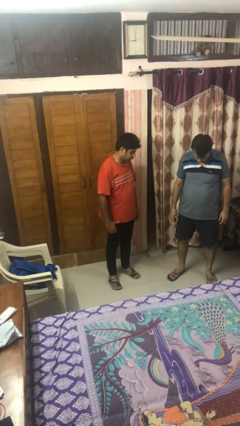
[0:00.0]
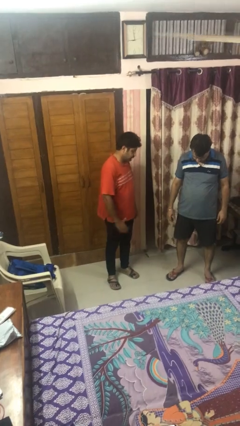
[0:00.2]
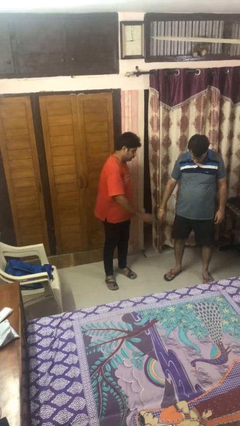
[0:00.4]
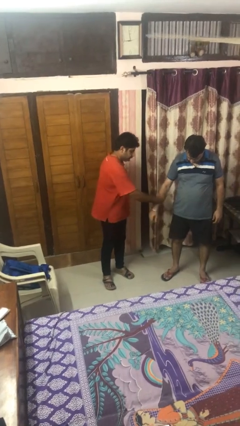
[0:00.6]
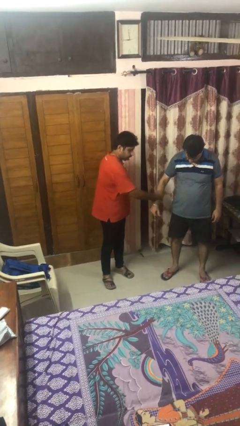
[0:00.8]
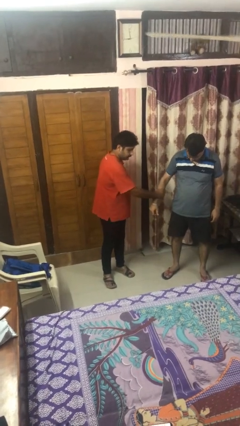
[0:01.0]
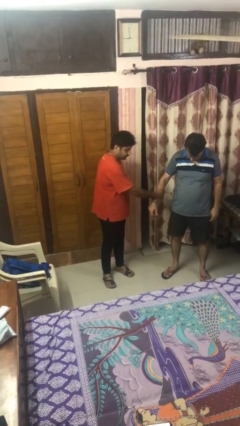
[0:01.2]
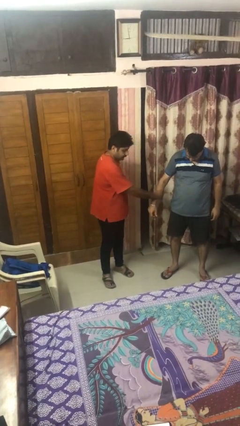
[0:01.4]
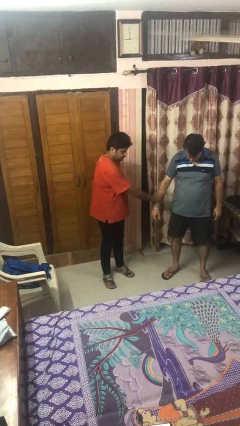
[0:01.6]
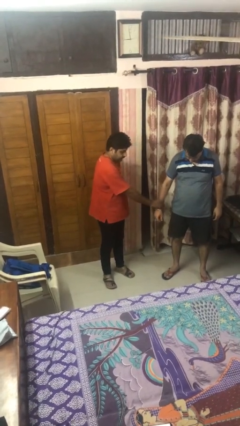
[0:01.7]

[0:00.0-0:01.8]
person grabs person by forearm

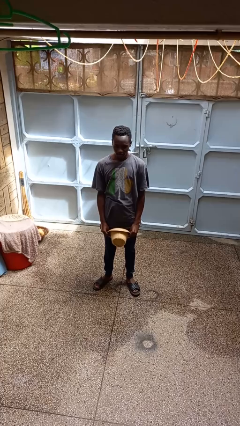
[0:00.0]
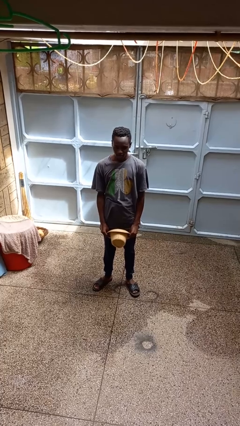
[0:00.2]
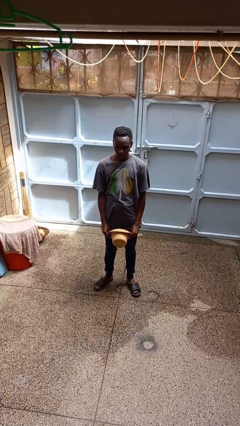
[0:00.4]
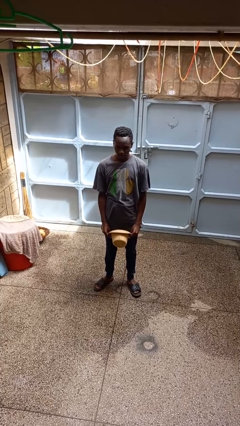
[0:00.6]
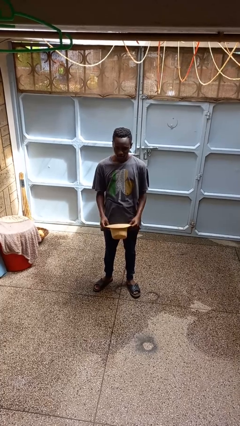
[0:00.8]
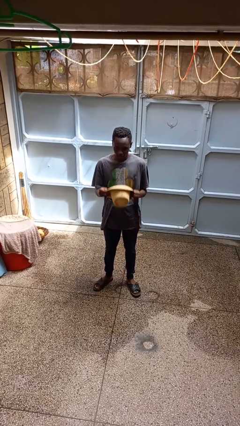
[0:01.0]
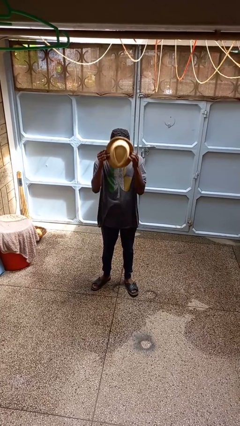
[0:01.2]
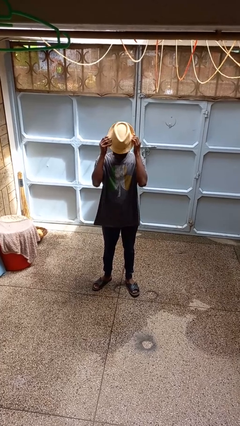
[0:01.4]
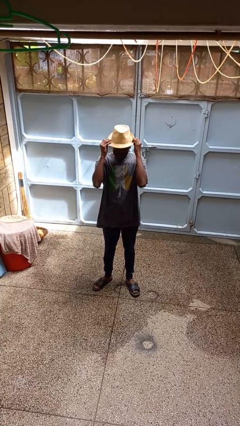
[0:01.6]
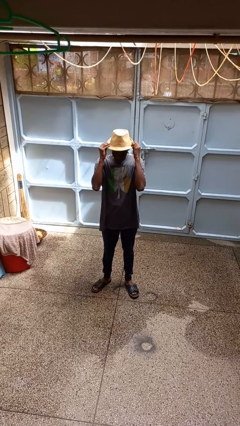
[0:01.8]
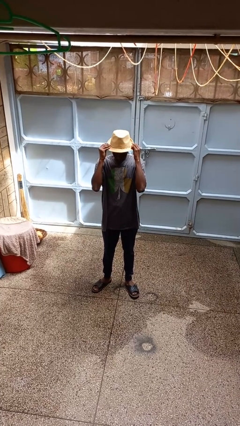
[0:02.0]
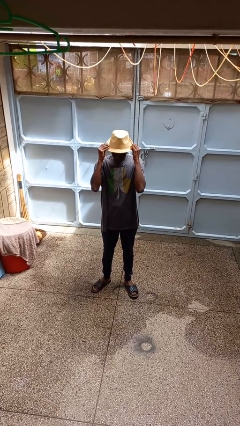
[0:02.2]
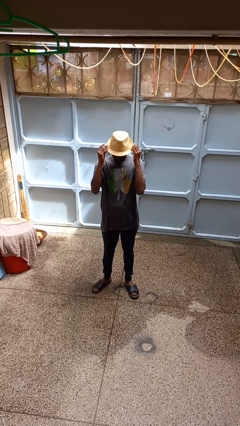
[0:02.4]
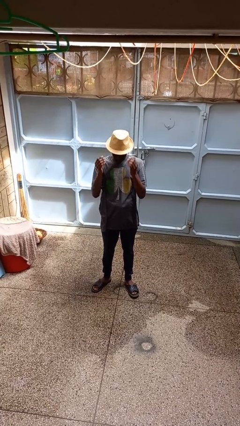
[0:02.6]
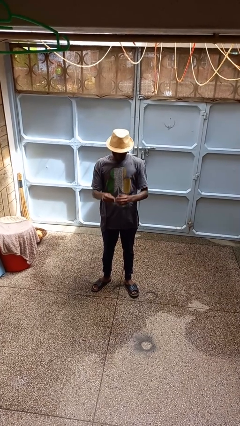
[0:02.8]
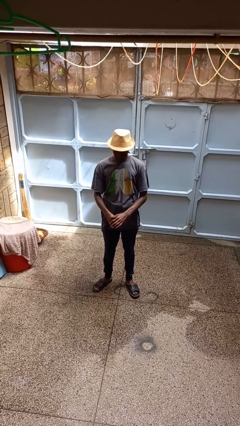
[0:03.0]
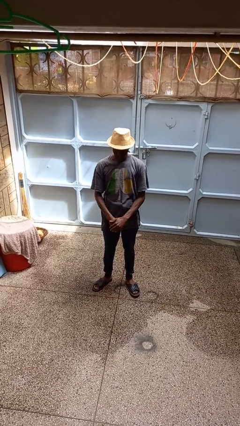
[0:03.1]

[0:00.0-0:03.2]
person puts on hat

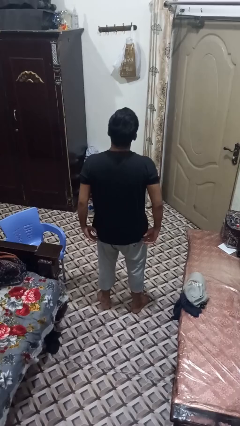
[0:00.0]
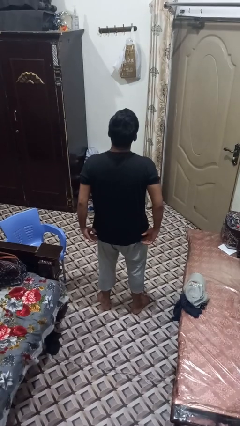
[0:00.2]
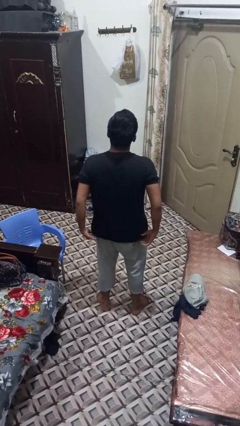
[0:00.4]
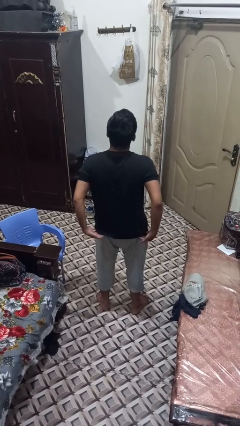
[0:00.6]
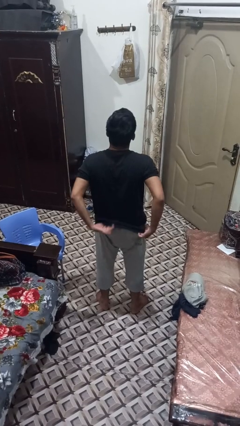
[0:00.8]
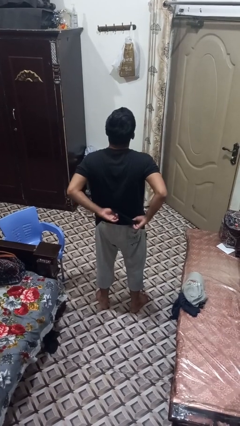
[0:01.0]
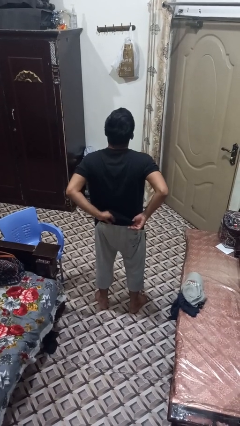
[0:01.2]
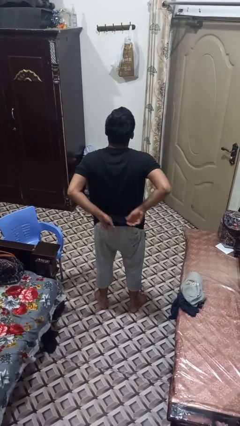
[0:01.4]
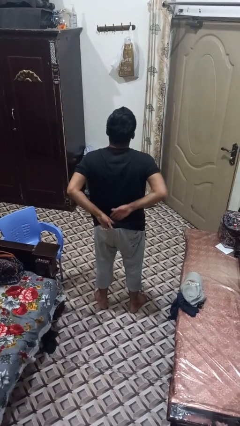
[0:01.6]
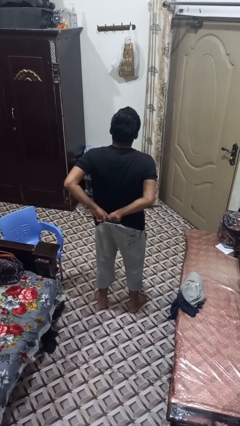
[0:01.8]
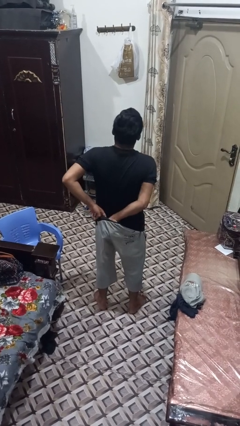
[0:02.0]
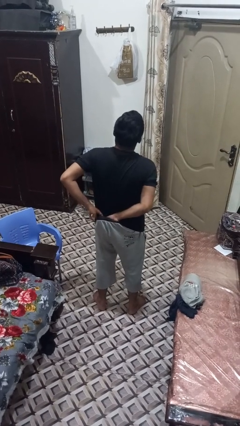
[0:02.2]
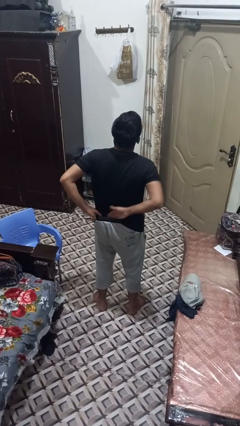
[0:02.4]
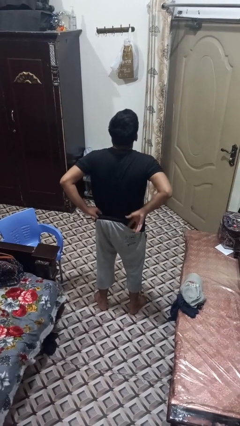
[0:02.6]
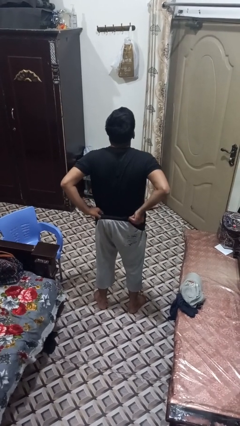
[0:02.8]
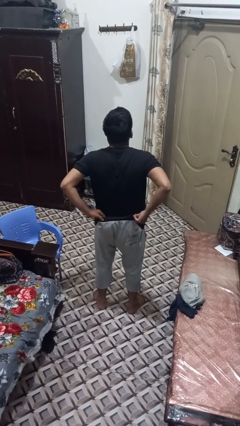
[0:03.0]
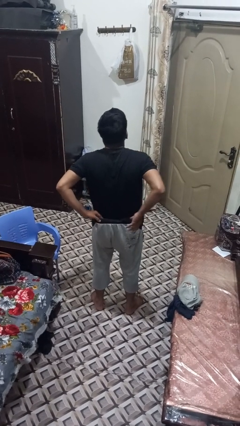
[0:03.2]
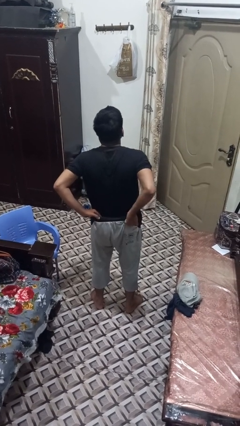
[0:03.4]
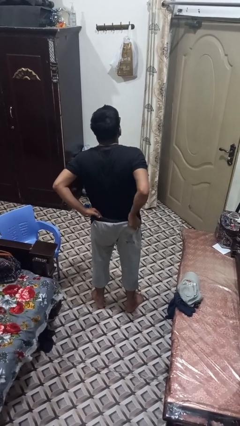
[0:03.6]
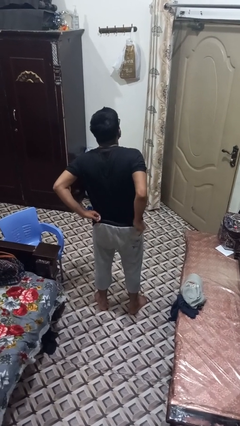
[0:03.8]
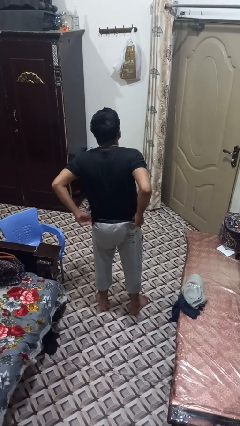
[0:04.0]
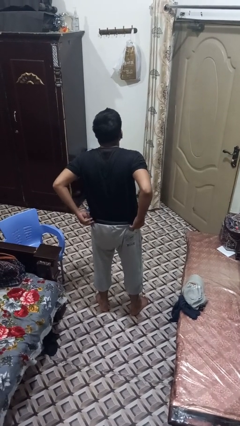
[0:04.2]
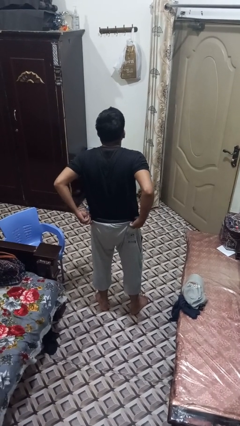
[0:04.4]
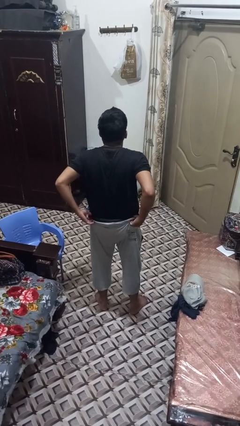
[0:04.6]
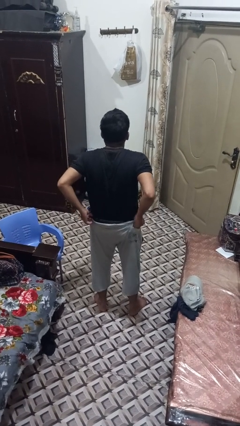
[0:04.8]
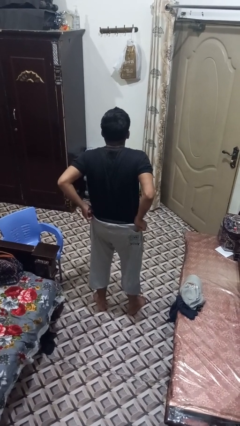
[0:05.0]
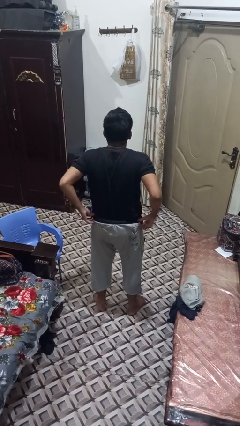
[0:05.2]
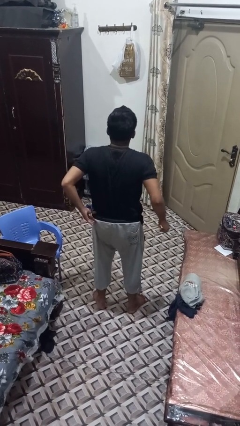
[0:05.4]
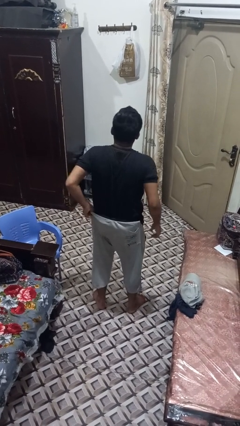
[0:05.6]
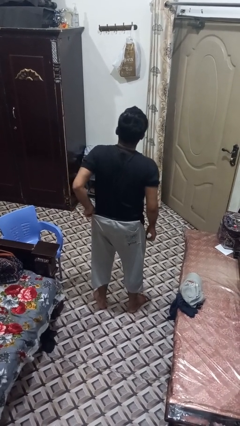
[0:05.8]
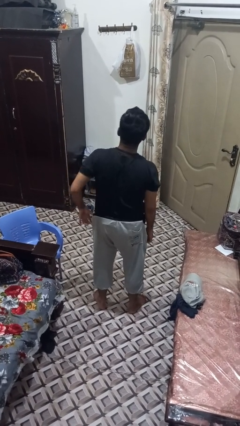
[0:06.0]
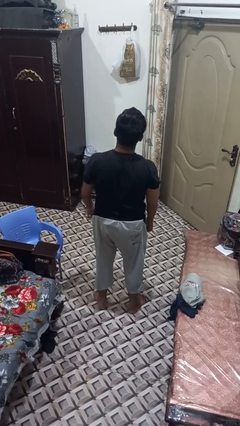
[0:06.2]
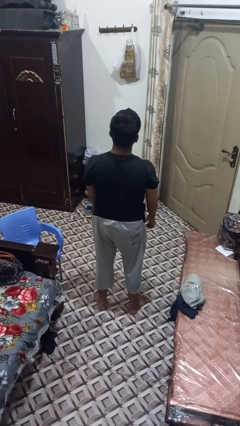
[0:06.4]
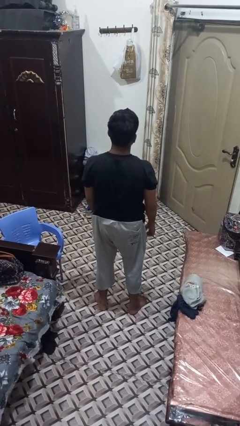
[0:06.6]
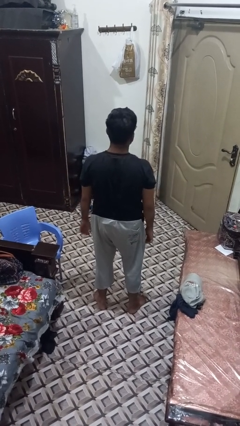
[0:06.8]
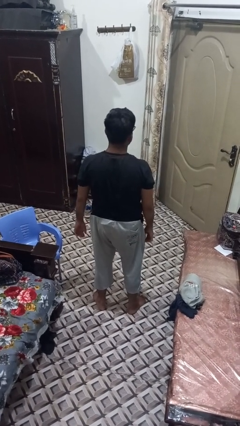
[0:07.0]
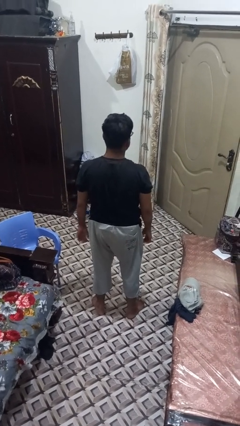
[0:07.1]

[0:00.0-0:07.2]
person tucks in shirt

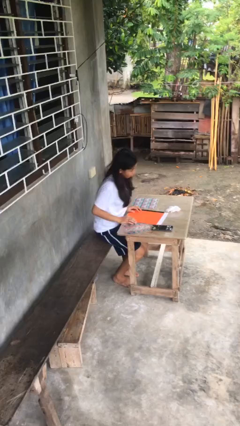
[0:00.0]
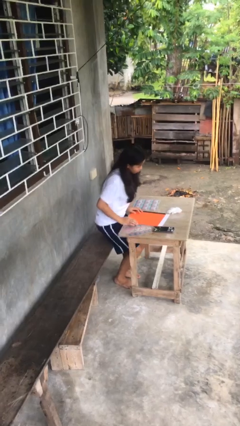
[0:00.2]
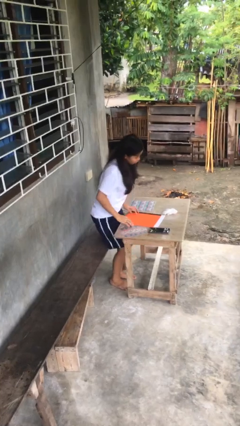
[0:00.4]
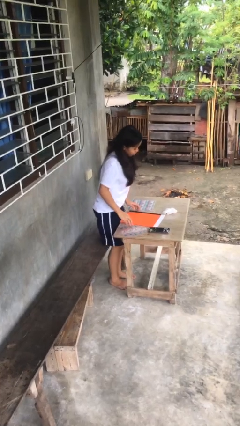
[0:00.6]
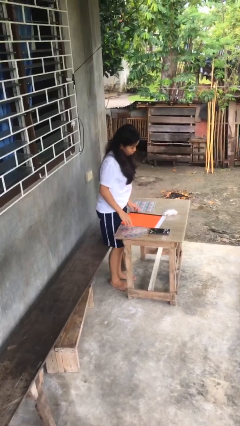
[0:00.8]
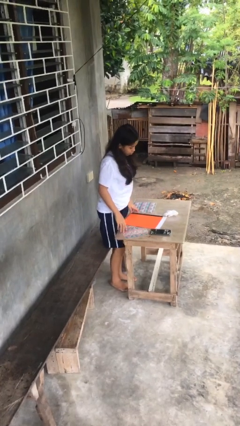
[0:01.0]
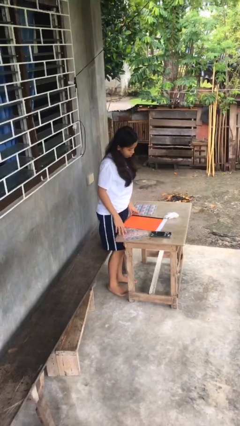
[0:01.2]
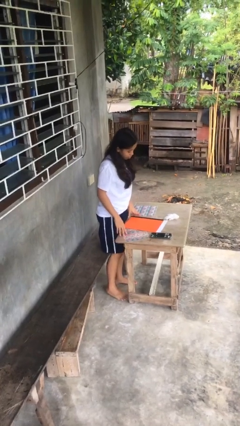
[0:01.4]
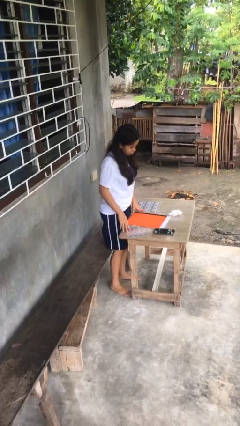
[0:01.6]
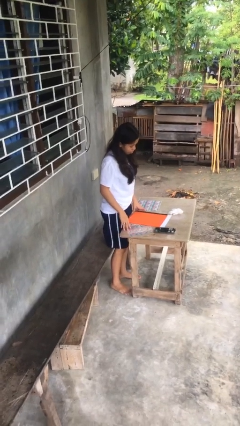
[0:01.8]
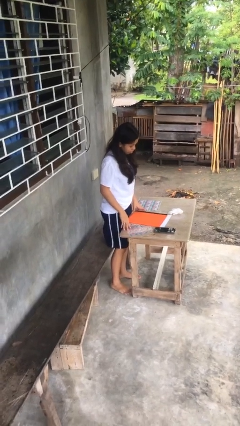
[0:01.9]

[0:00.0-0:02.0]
person stands up

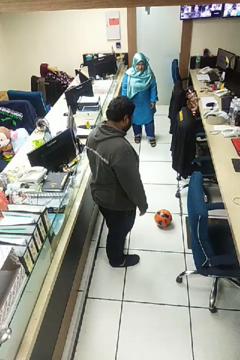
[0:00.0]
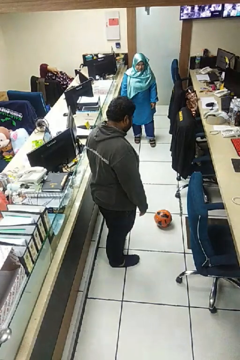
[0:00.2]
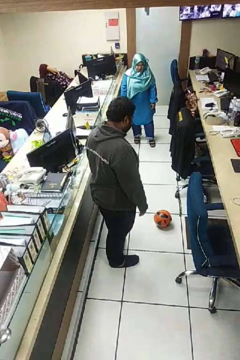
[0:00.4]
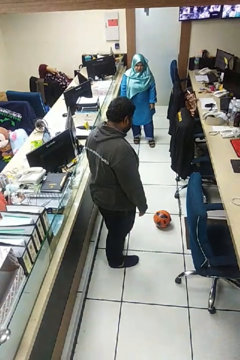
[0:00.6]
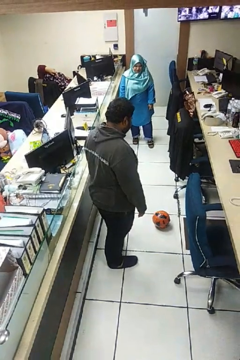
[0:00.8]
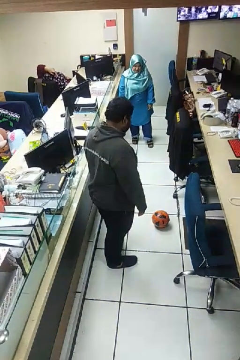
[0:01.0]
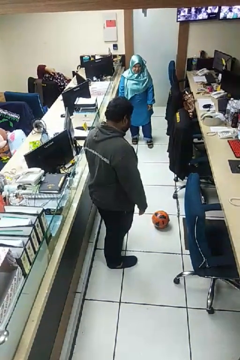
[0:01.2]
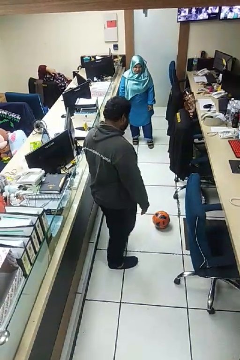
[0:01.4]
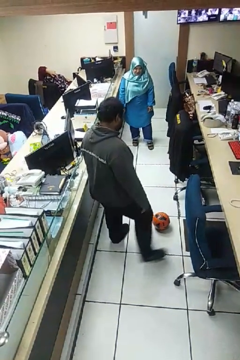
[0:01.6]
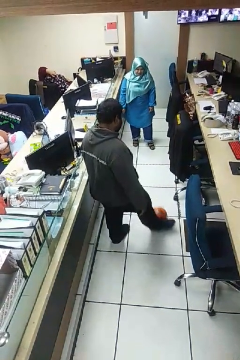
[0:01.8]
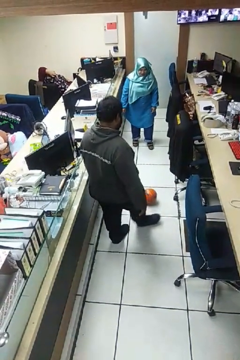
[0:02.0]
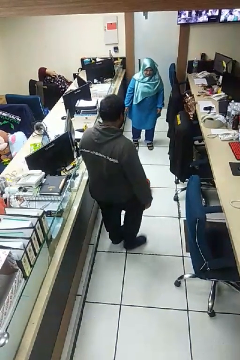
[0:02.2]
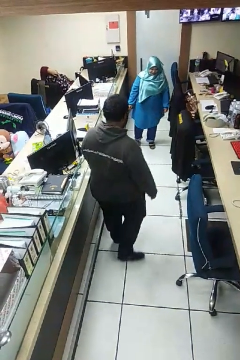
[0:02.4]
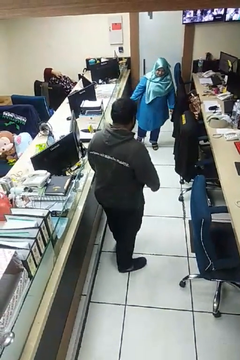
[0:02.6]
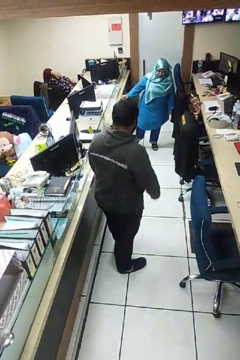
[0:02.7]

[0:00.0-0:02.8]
person kicks object to person

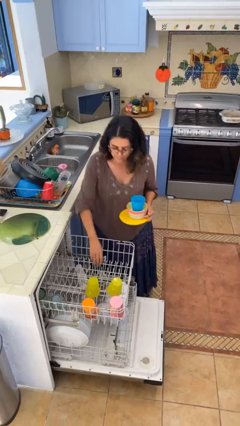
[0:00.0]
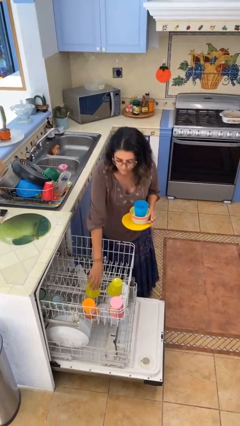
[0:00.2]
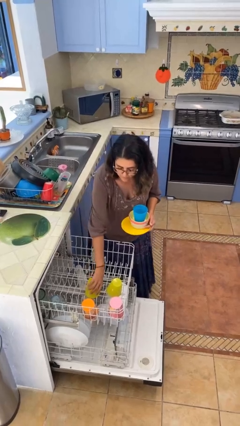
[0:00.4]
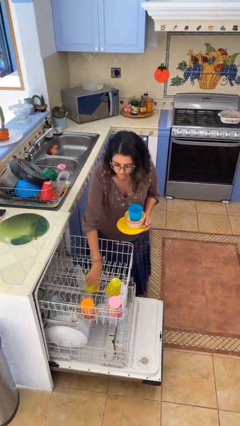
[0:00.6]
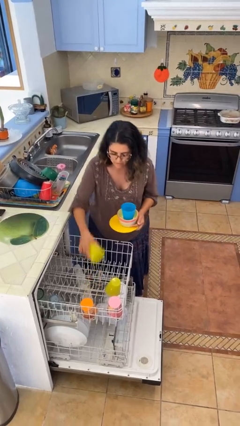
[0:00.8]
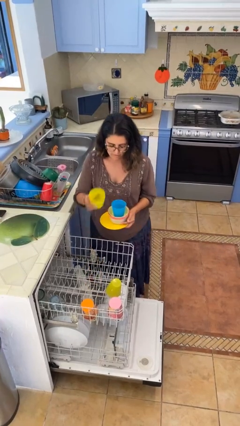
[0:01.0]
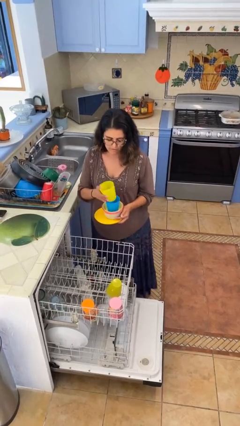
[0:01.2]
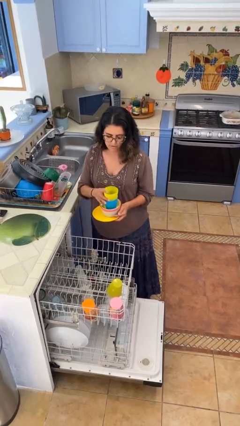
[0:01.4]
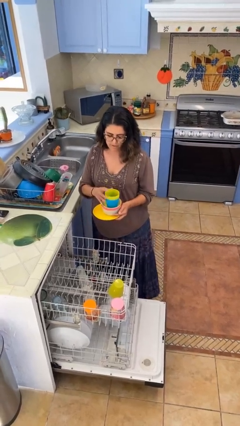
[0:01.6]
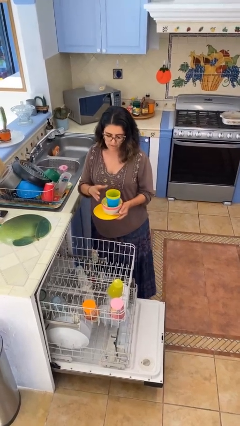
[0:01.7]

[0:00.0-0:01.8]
person unloads dishwasher
